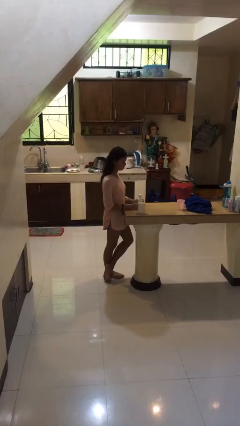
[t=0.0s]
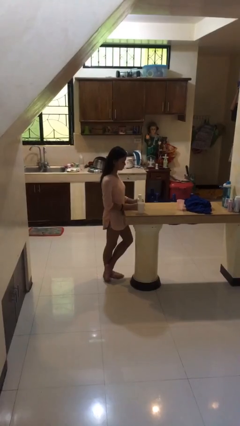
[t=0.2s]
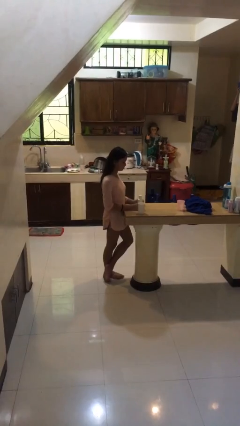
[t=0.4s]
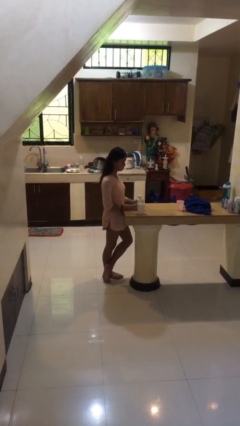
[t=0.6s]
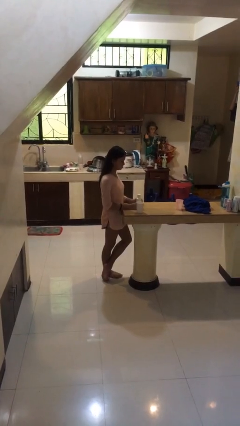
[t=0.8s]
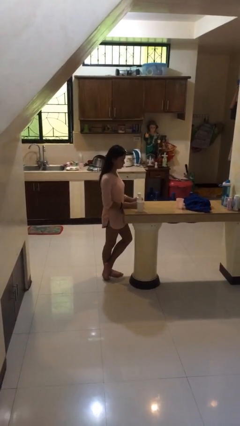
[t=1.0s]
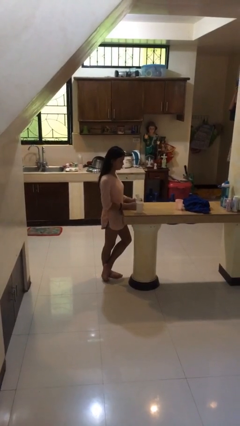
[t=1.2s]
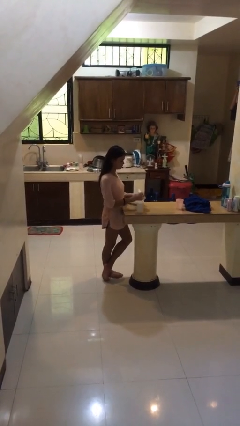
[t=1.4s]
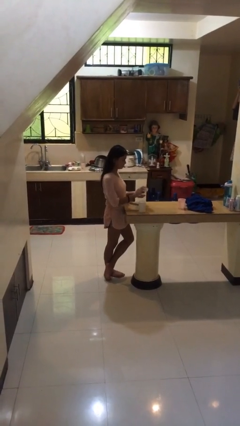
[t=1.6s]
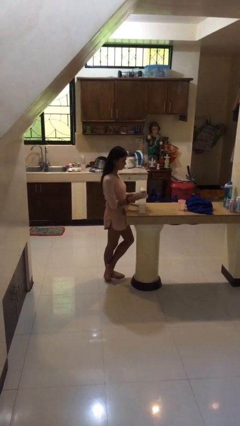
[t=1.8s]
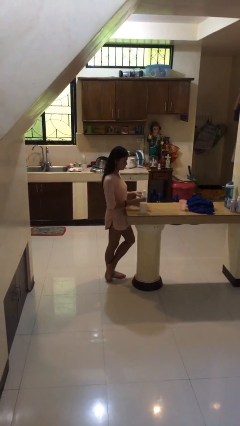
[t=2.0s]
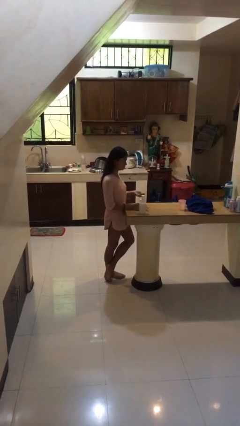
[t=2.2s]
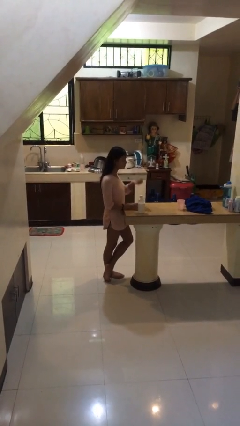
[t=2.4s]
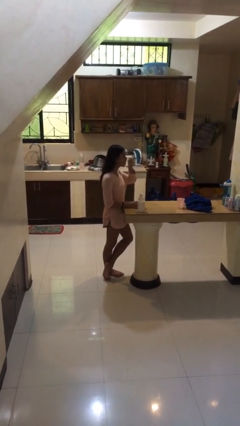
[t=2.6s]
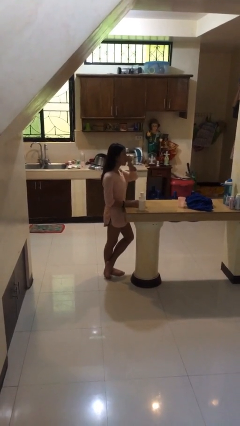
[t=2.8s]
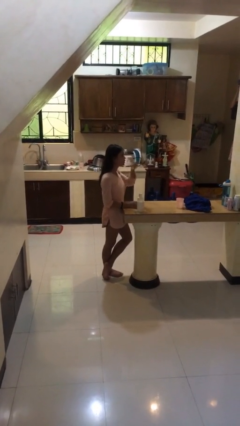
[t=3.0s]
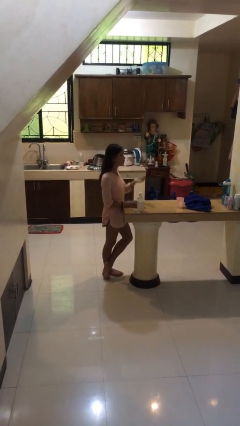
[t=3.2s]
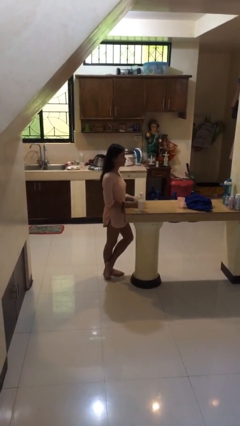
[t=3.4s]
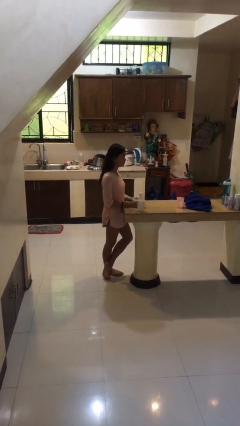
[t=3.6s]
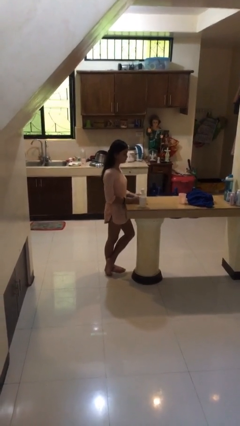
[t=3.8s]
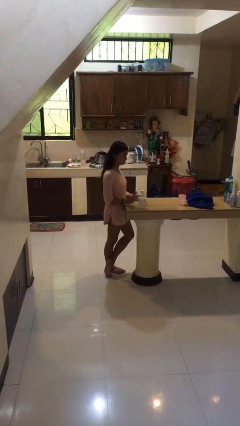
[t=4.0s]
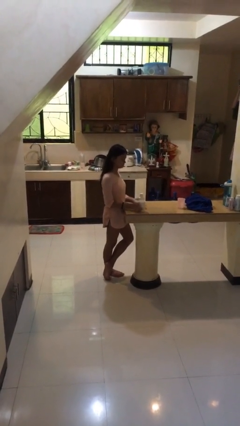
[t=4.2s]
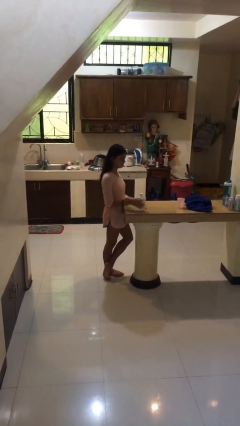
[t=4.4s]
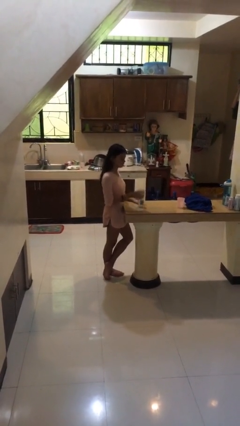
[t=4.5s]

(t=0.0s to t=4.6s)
person takes medicine pills

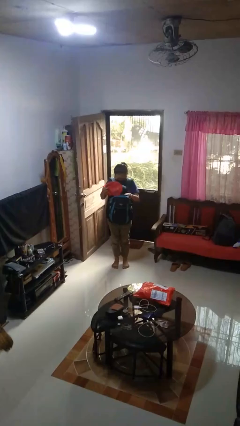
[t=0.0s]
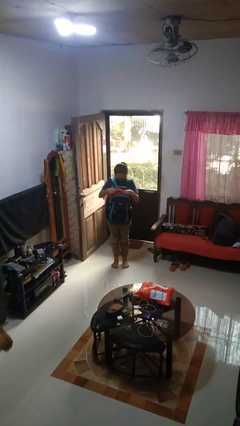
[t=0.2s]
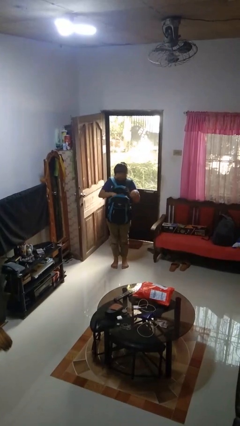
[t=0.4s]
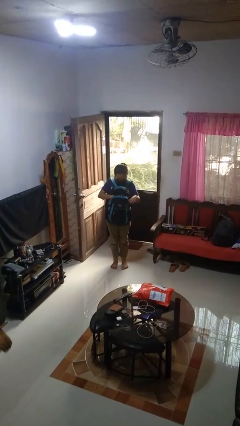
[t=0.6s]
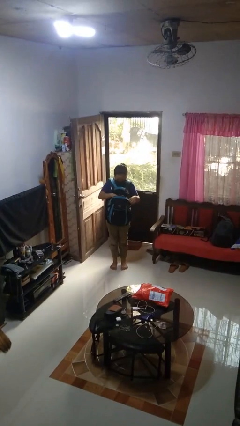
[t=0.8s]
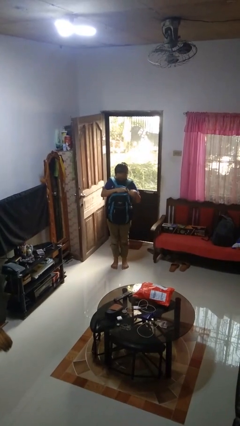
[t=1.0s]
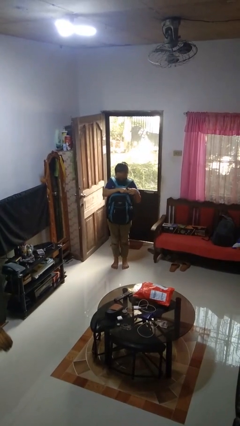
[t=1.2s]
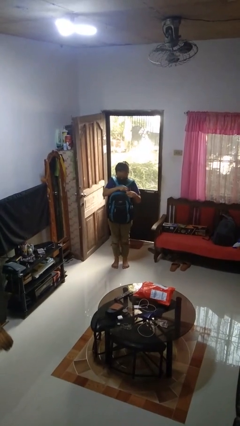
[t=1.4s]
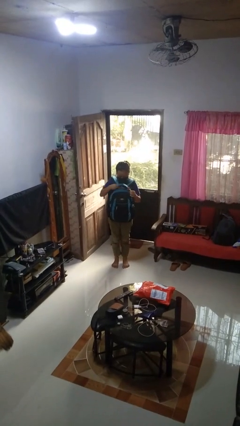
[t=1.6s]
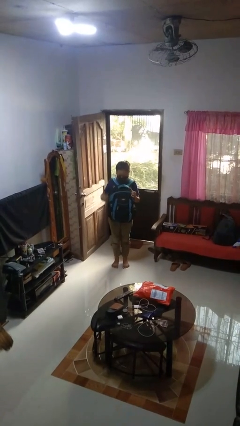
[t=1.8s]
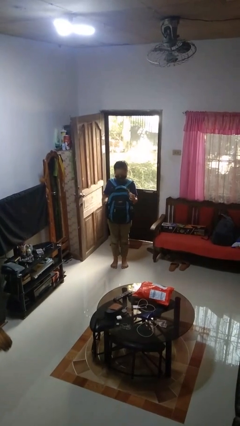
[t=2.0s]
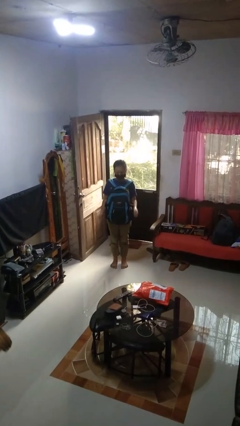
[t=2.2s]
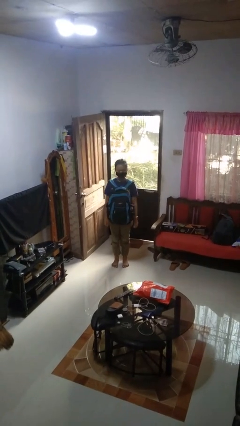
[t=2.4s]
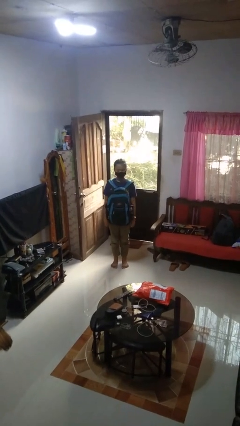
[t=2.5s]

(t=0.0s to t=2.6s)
person puts object into backpack

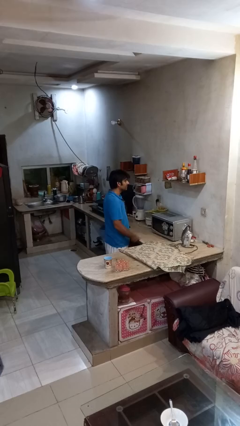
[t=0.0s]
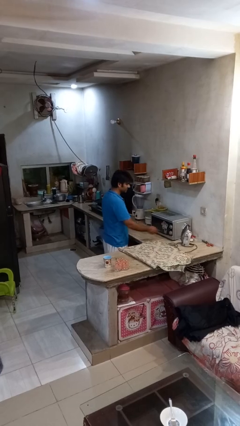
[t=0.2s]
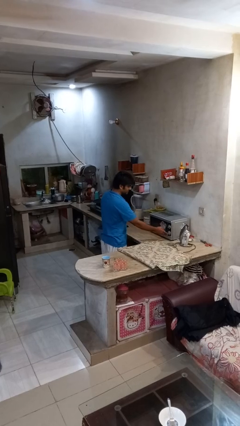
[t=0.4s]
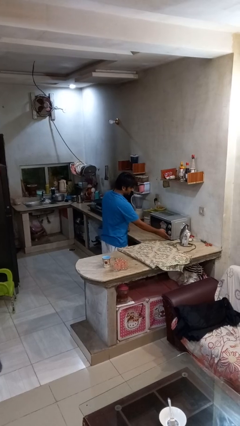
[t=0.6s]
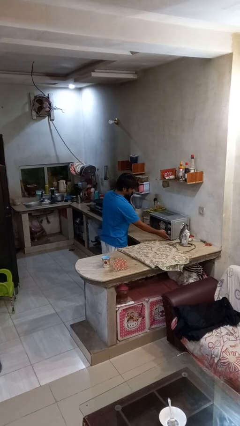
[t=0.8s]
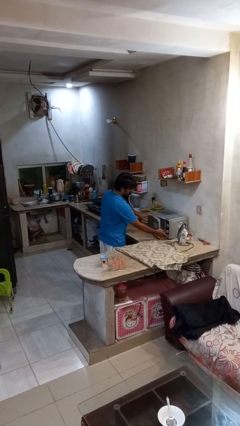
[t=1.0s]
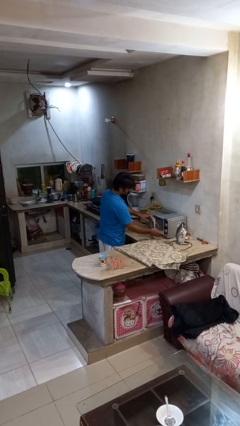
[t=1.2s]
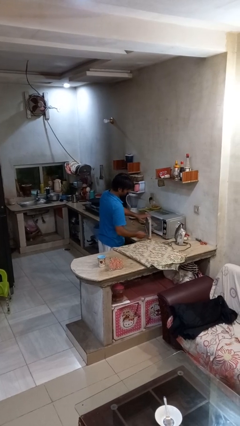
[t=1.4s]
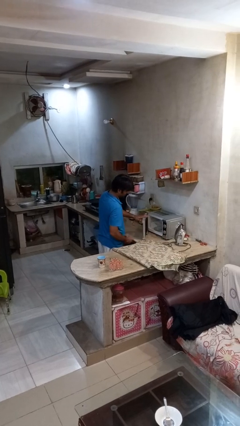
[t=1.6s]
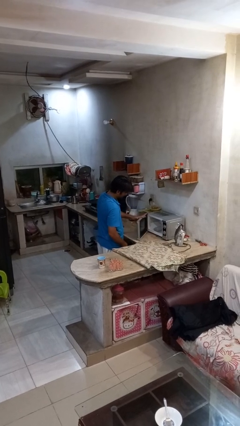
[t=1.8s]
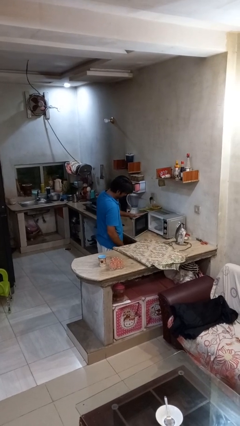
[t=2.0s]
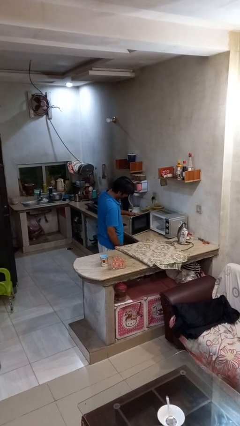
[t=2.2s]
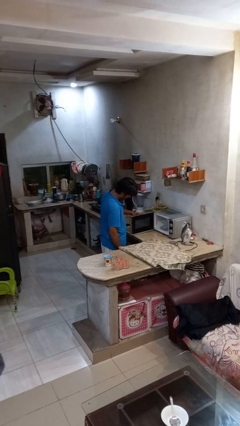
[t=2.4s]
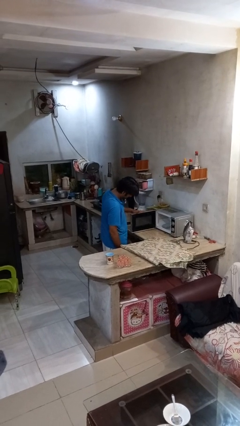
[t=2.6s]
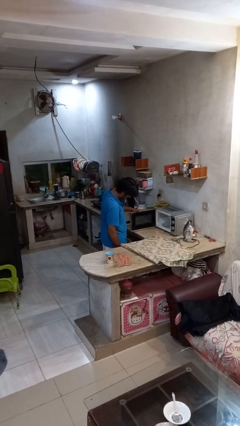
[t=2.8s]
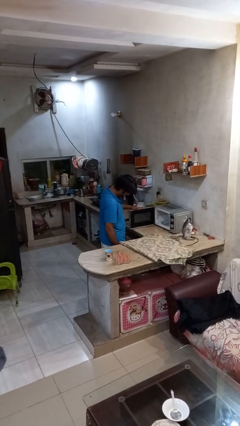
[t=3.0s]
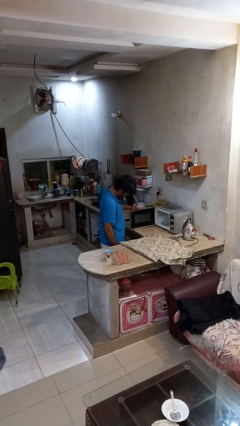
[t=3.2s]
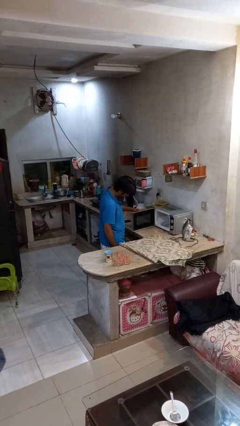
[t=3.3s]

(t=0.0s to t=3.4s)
person opens microwave

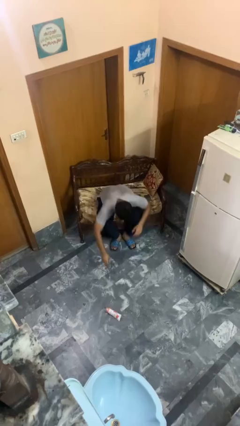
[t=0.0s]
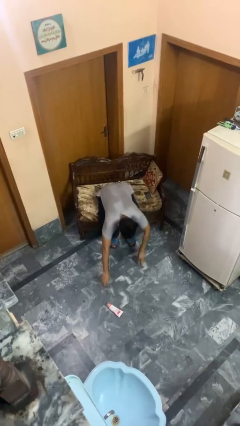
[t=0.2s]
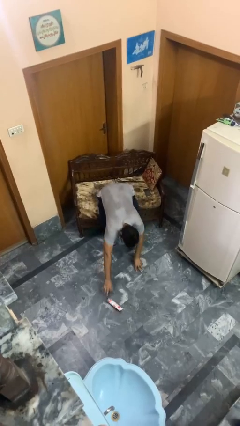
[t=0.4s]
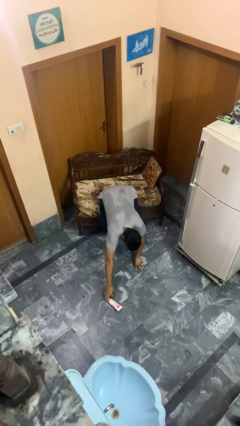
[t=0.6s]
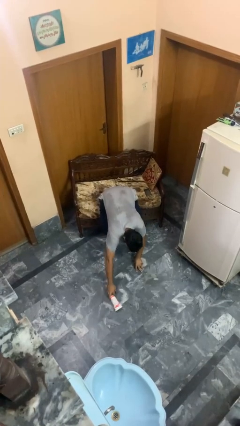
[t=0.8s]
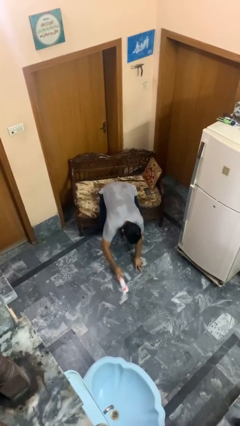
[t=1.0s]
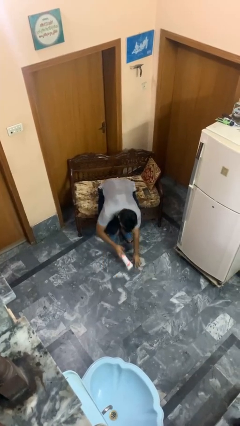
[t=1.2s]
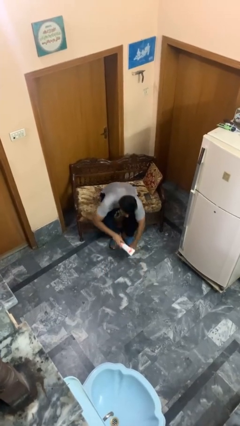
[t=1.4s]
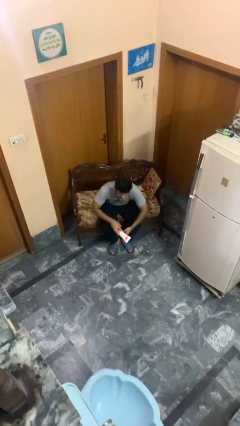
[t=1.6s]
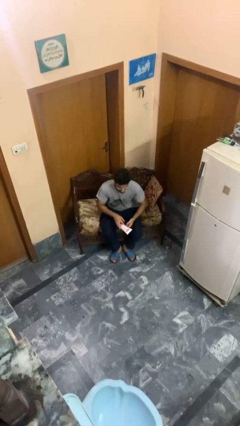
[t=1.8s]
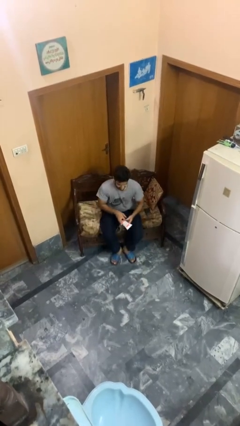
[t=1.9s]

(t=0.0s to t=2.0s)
person picks up object from floor

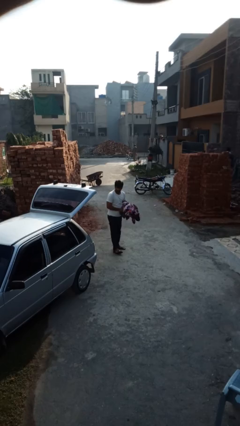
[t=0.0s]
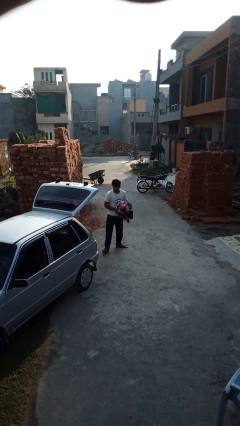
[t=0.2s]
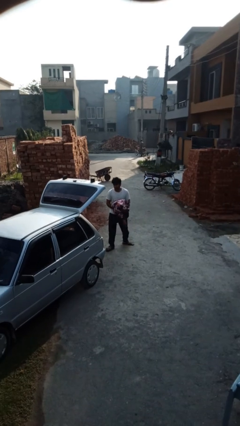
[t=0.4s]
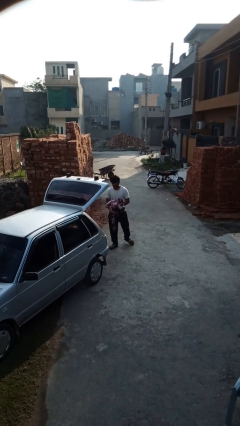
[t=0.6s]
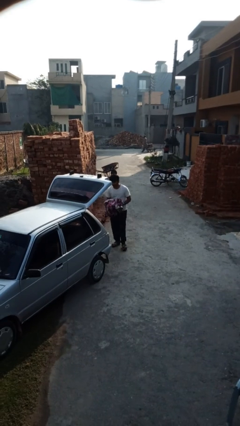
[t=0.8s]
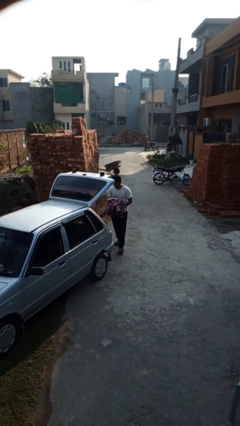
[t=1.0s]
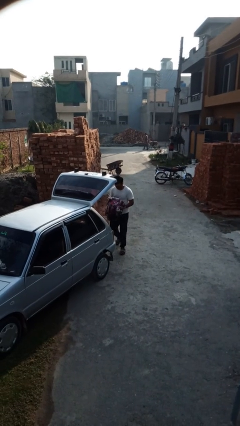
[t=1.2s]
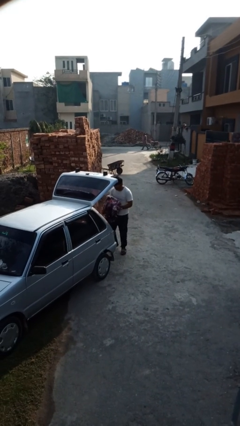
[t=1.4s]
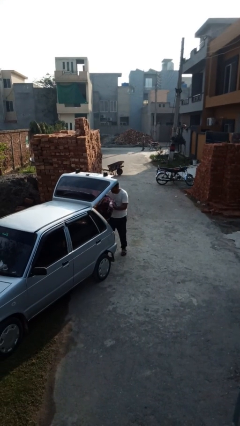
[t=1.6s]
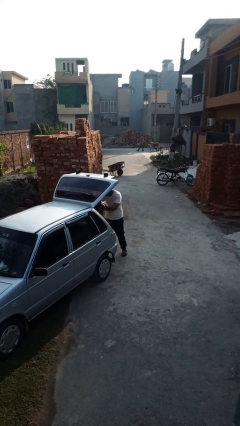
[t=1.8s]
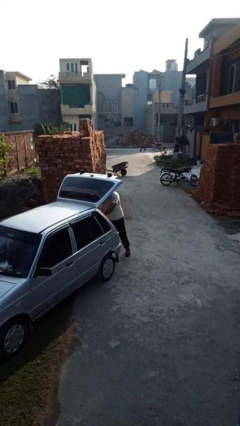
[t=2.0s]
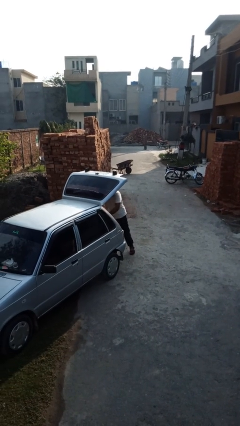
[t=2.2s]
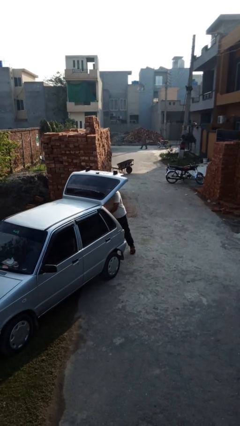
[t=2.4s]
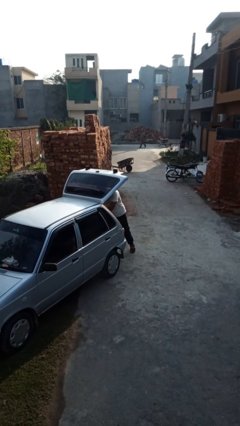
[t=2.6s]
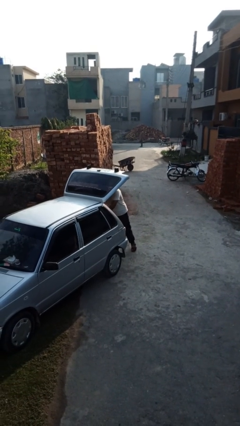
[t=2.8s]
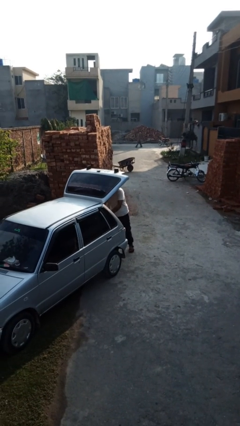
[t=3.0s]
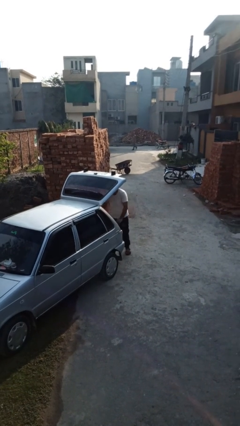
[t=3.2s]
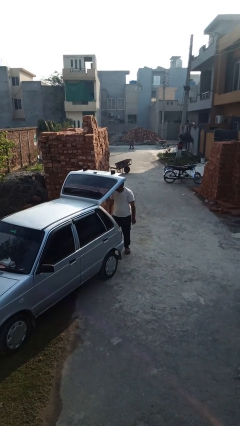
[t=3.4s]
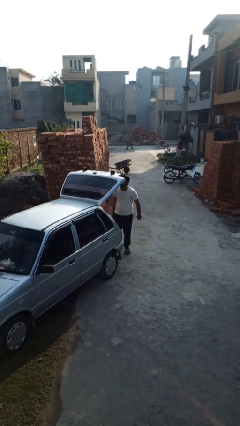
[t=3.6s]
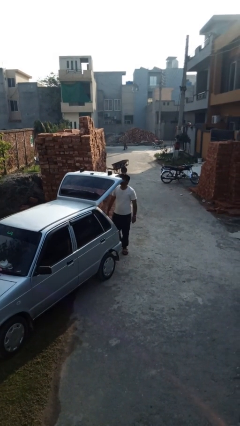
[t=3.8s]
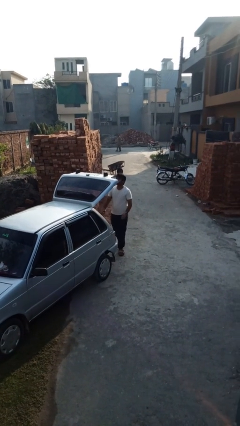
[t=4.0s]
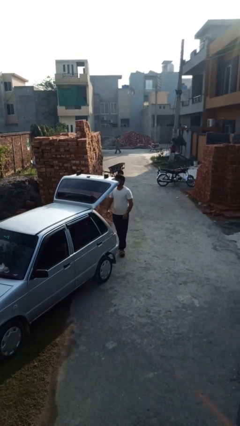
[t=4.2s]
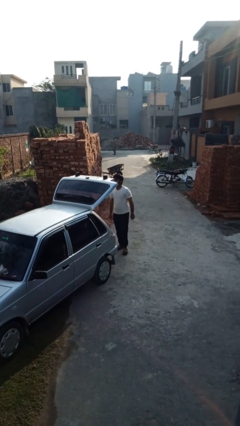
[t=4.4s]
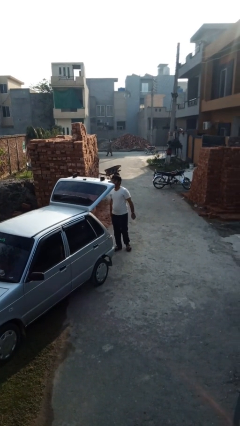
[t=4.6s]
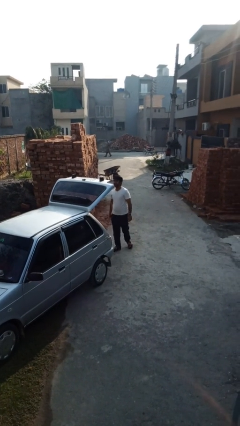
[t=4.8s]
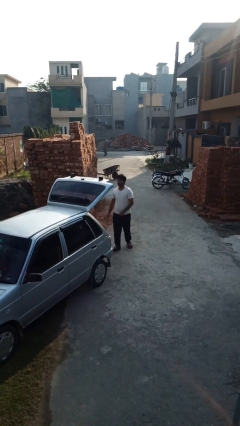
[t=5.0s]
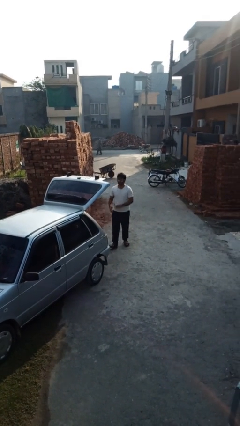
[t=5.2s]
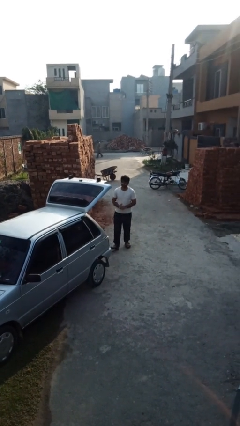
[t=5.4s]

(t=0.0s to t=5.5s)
person loads car
